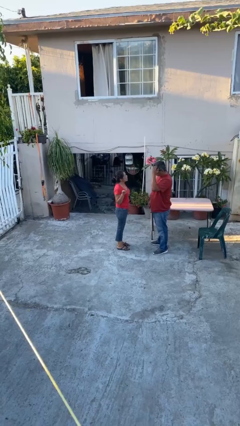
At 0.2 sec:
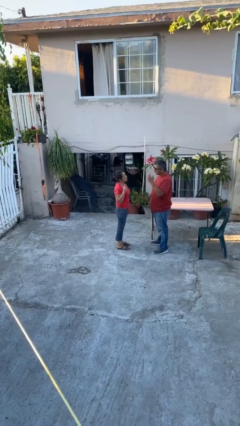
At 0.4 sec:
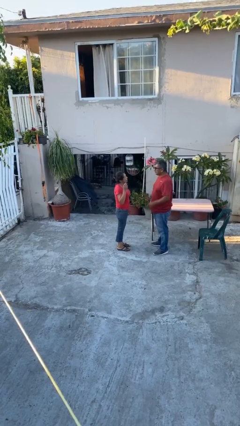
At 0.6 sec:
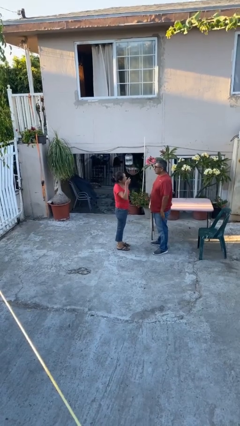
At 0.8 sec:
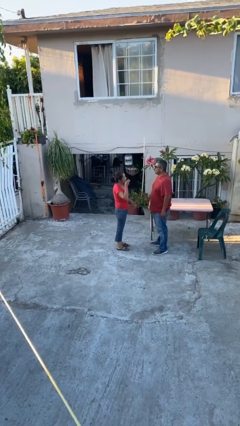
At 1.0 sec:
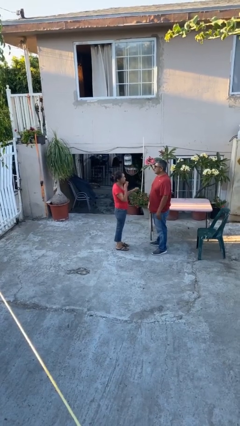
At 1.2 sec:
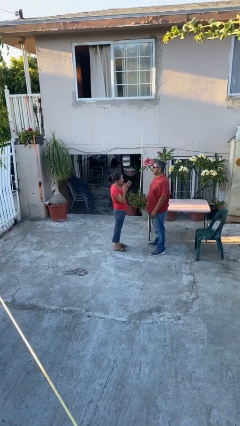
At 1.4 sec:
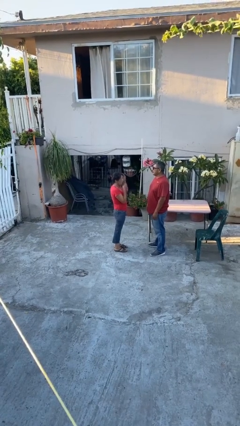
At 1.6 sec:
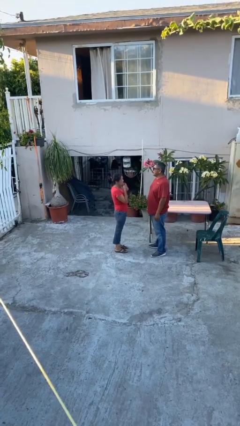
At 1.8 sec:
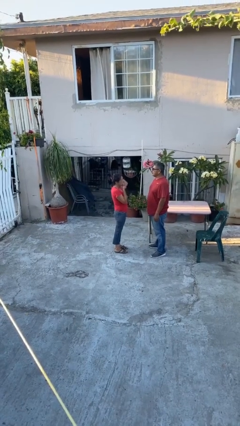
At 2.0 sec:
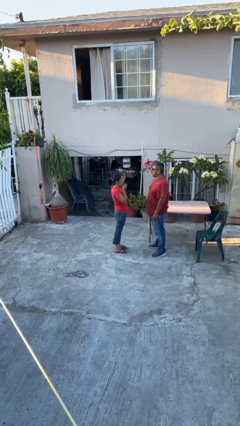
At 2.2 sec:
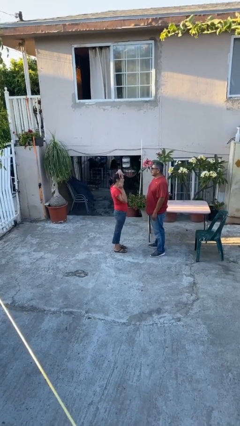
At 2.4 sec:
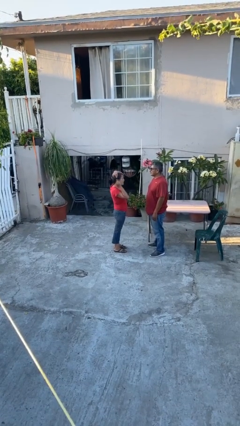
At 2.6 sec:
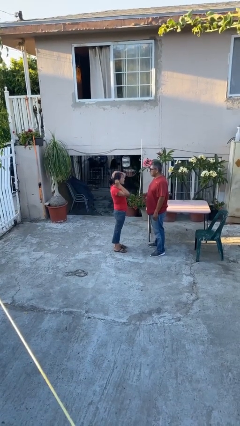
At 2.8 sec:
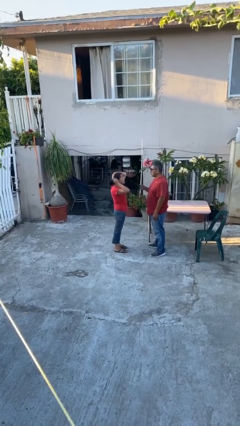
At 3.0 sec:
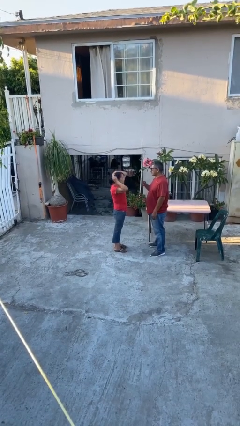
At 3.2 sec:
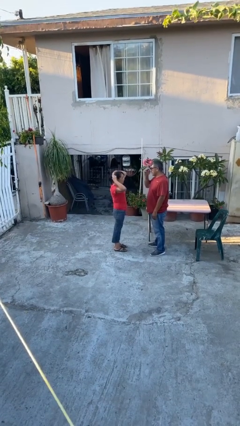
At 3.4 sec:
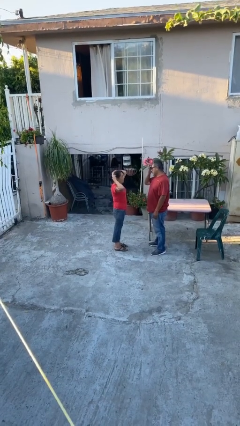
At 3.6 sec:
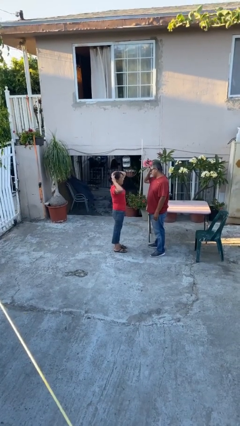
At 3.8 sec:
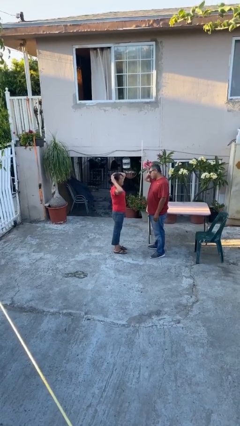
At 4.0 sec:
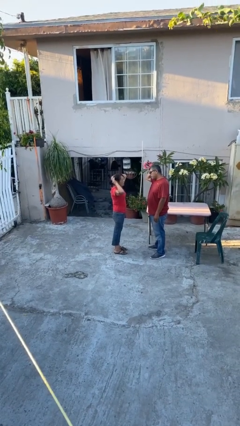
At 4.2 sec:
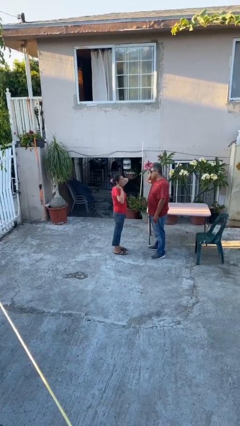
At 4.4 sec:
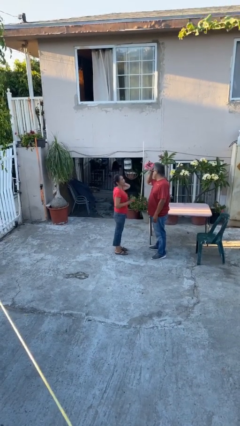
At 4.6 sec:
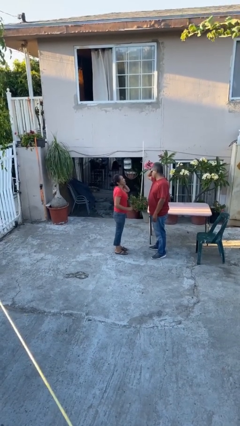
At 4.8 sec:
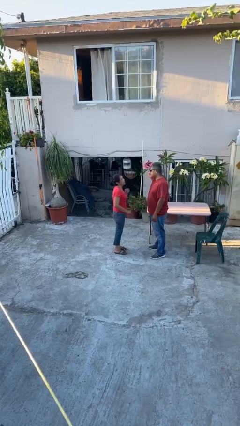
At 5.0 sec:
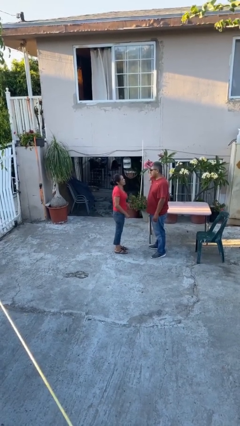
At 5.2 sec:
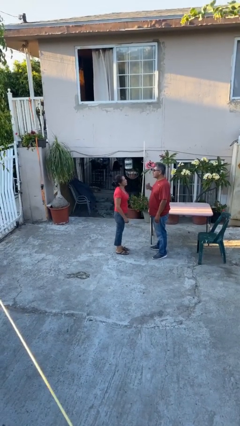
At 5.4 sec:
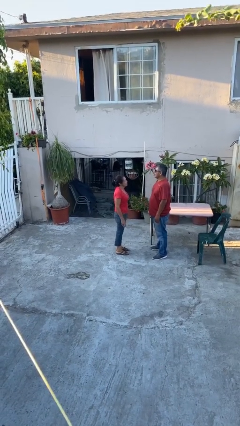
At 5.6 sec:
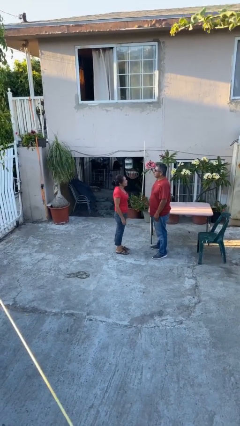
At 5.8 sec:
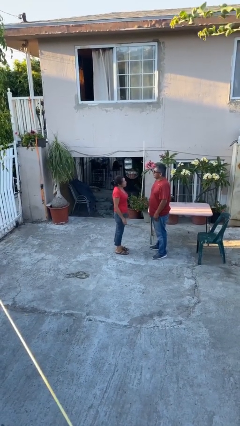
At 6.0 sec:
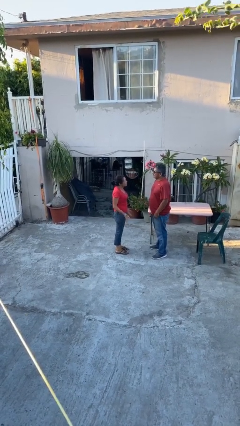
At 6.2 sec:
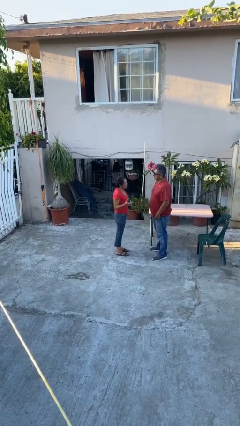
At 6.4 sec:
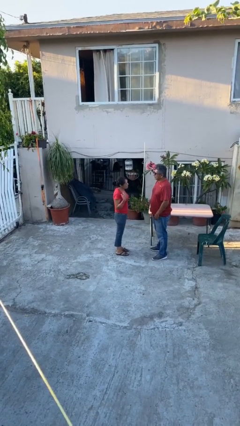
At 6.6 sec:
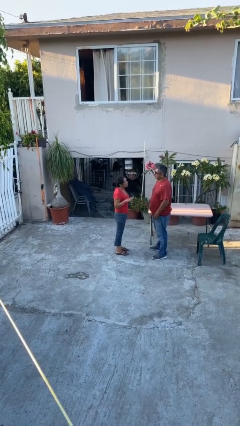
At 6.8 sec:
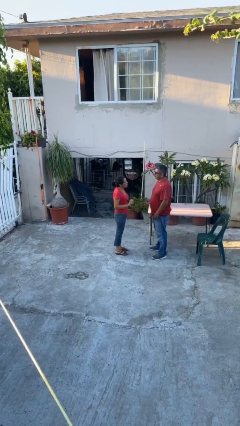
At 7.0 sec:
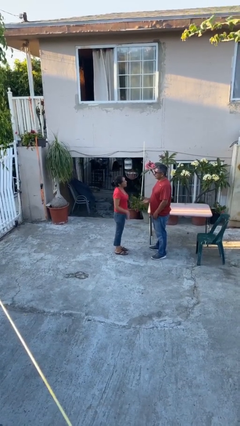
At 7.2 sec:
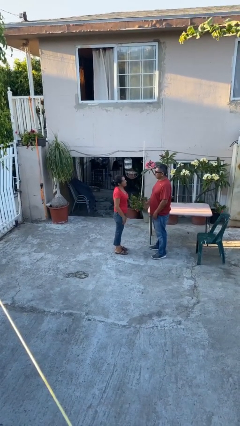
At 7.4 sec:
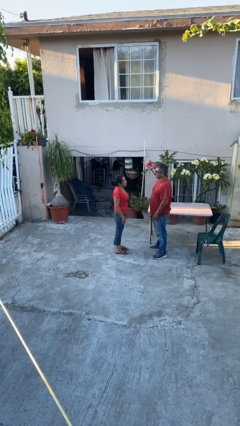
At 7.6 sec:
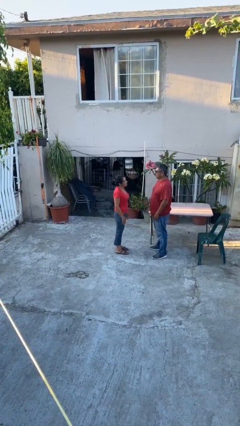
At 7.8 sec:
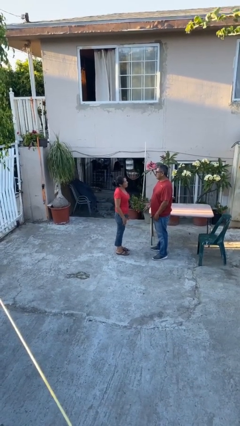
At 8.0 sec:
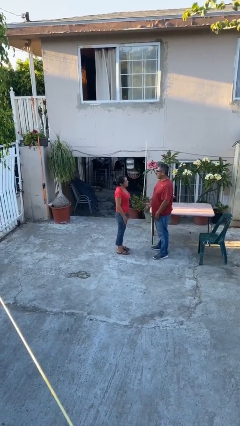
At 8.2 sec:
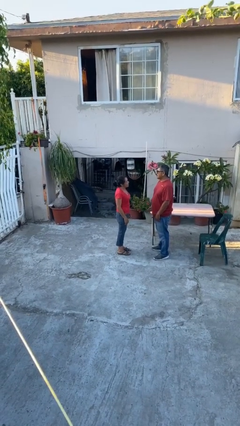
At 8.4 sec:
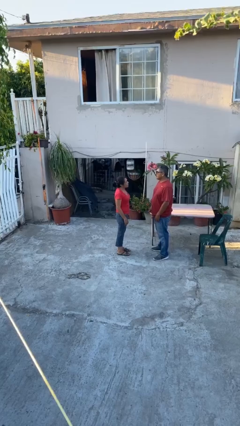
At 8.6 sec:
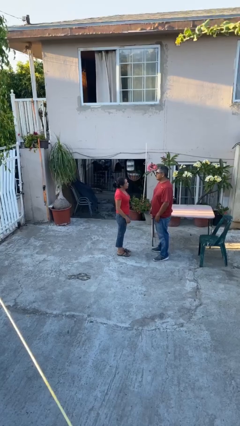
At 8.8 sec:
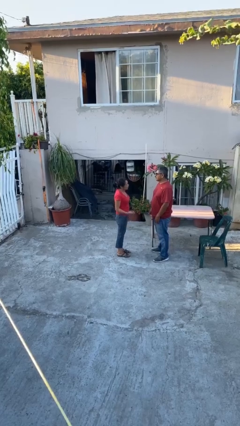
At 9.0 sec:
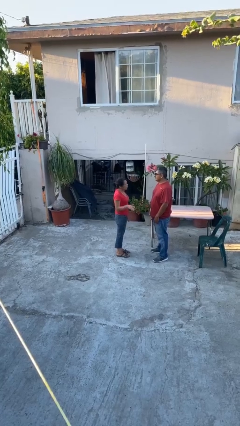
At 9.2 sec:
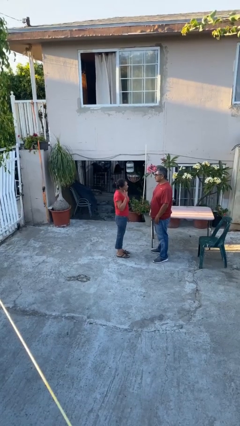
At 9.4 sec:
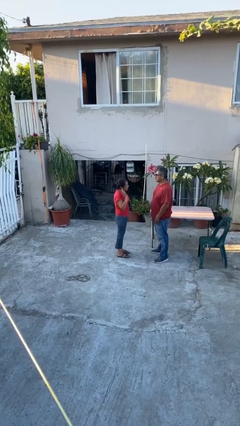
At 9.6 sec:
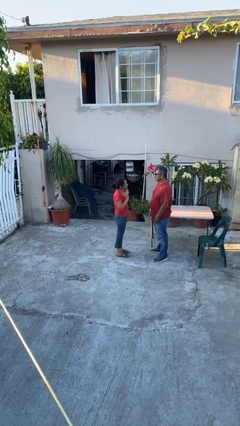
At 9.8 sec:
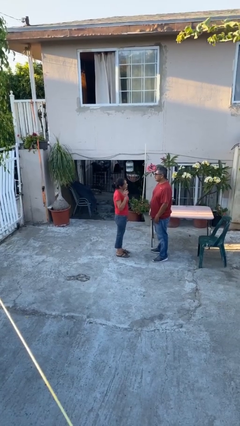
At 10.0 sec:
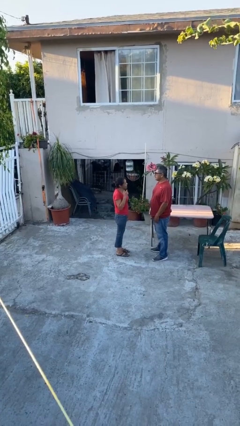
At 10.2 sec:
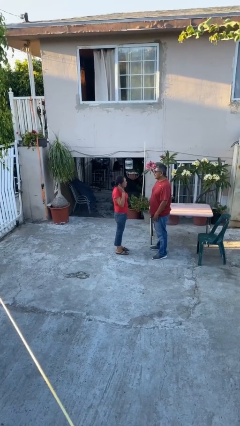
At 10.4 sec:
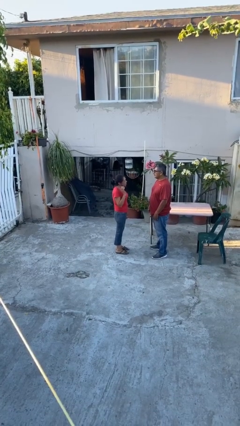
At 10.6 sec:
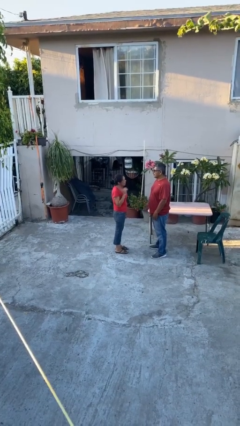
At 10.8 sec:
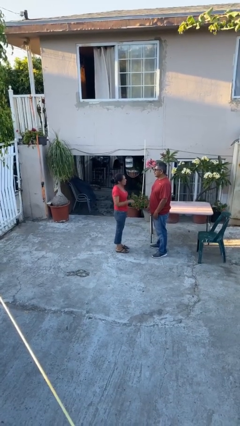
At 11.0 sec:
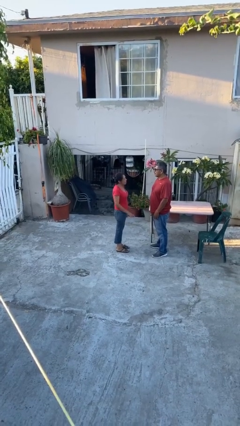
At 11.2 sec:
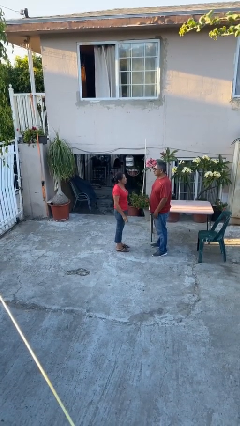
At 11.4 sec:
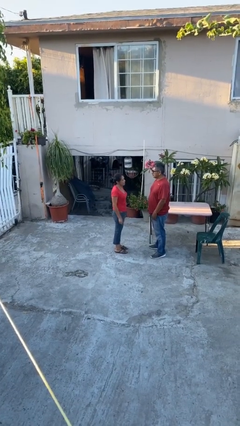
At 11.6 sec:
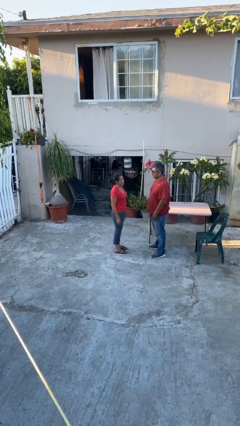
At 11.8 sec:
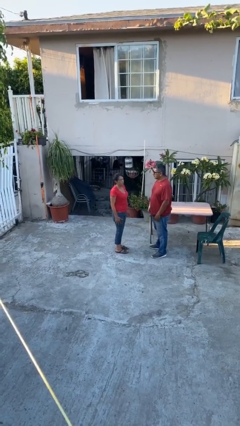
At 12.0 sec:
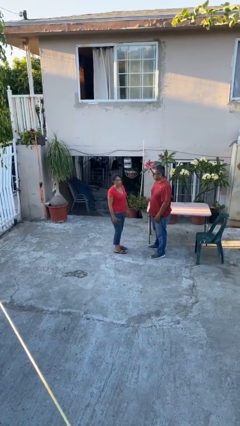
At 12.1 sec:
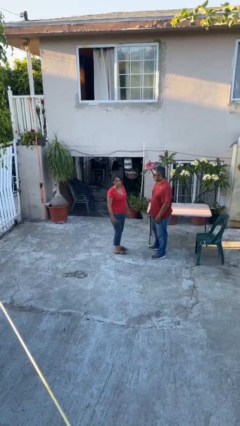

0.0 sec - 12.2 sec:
person talks to person

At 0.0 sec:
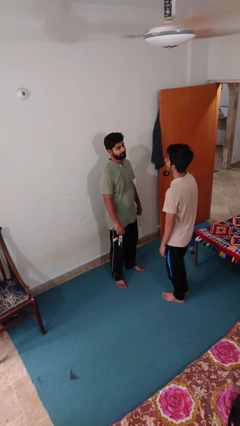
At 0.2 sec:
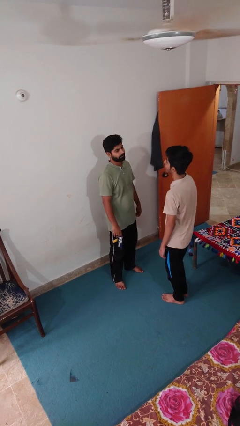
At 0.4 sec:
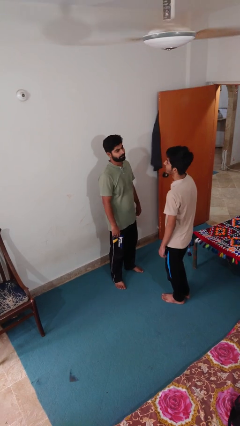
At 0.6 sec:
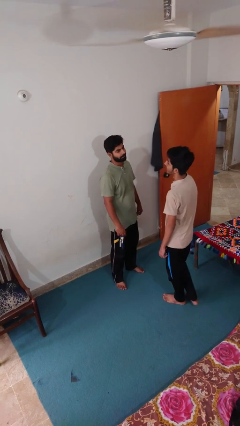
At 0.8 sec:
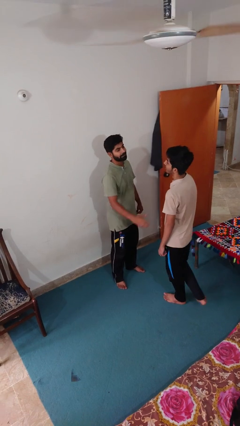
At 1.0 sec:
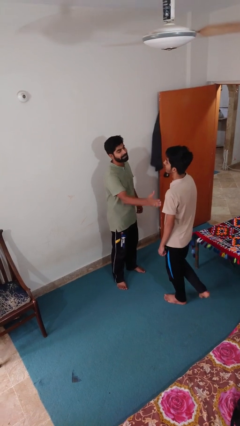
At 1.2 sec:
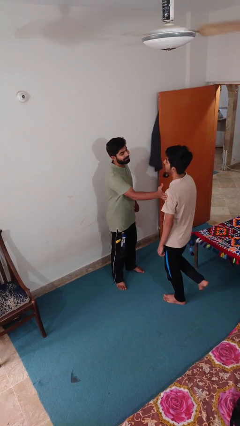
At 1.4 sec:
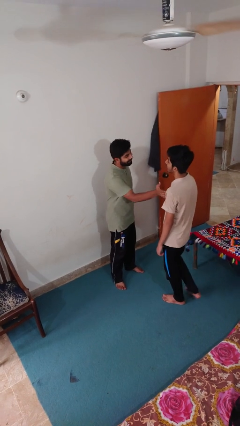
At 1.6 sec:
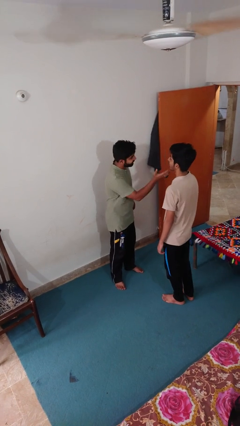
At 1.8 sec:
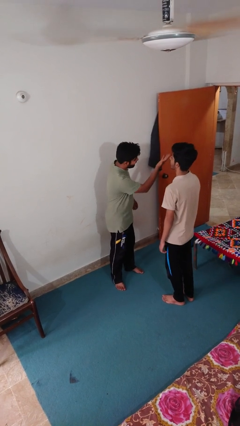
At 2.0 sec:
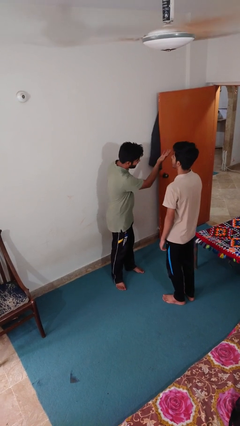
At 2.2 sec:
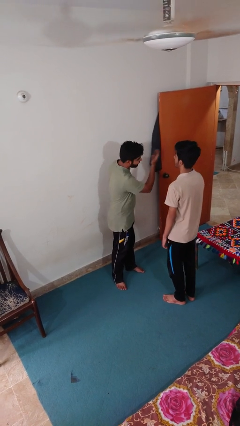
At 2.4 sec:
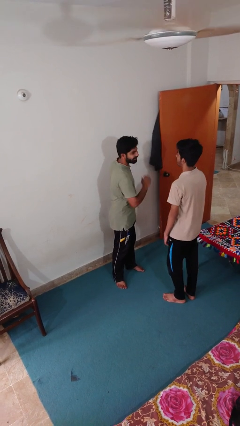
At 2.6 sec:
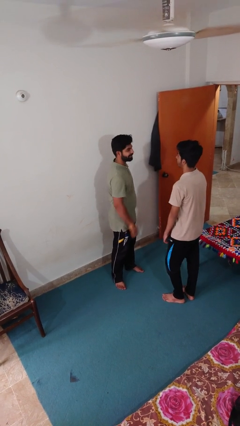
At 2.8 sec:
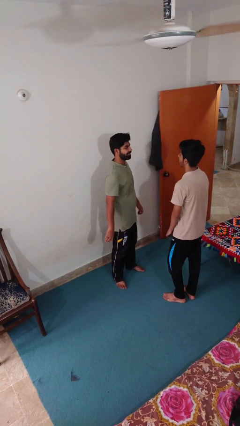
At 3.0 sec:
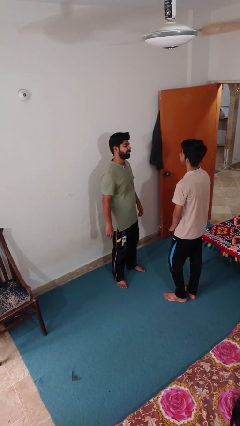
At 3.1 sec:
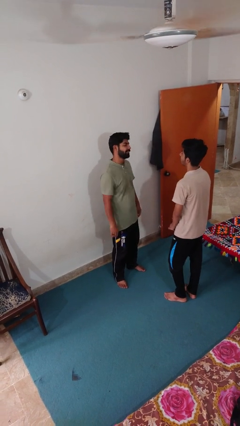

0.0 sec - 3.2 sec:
person shoves person

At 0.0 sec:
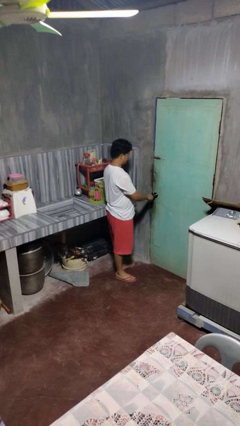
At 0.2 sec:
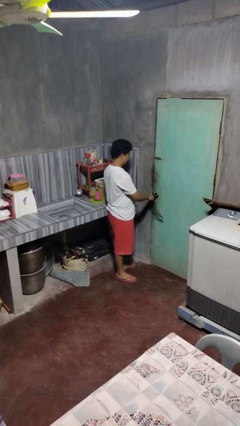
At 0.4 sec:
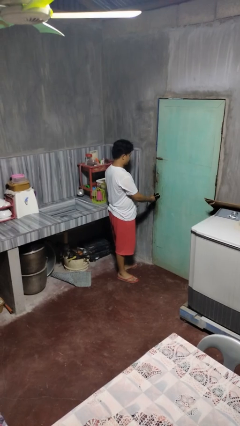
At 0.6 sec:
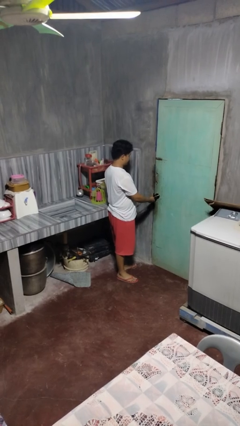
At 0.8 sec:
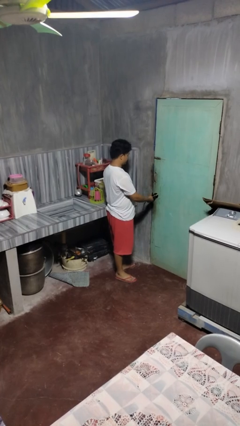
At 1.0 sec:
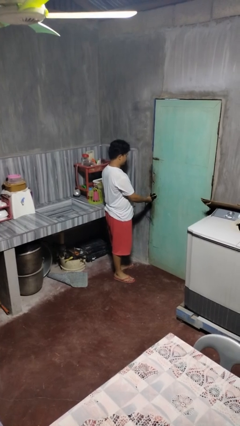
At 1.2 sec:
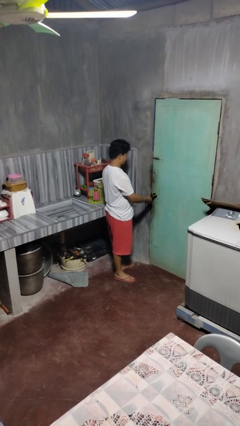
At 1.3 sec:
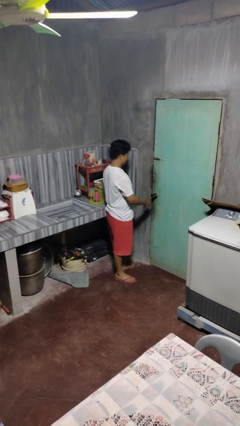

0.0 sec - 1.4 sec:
person locks door with keys

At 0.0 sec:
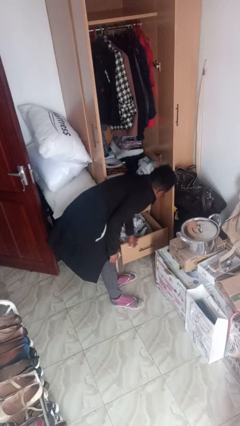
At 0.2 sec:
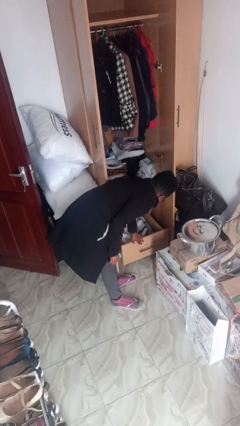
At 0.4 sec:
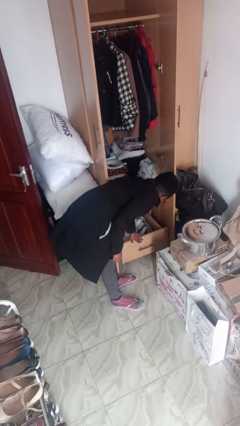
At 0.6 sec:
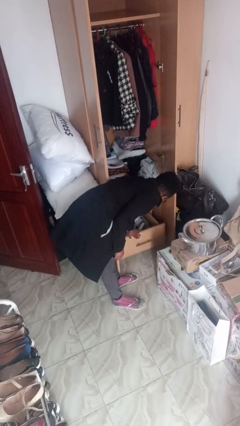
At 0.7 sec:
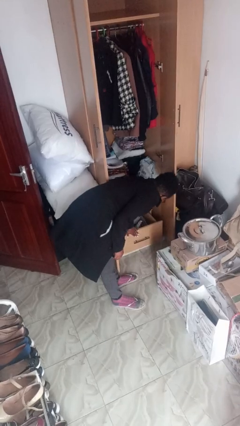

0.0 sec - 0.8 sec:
person closes dresser drawer

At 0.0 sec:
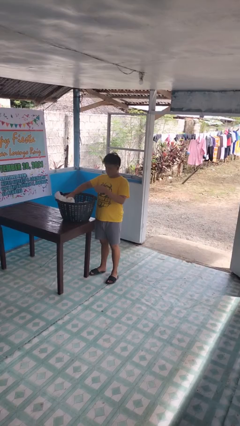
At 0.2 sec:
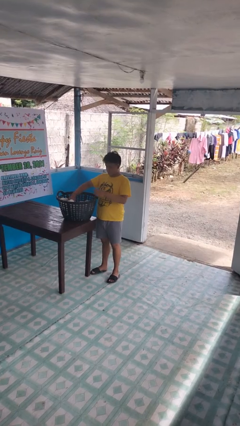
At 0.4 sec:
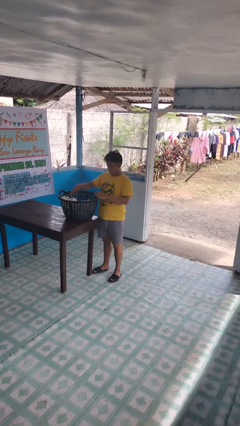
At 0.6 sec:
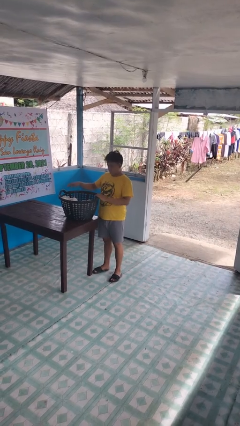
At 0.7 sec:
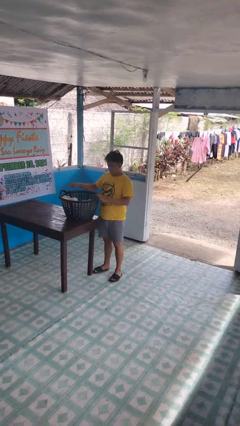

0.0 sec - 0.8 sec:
person puts object into basket
